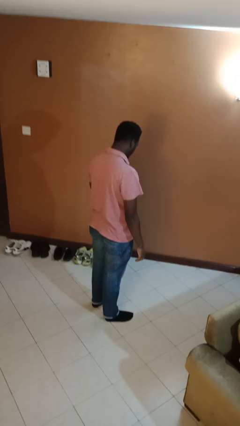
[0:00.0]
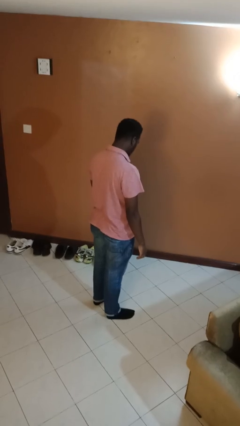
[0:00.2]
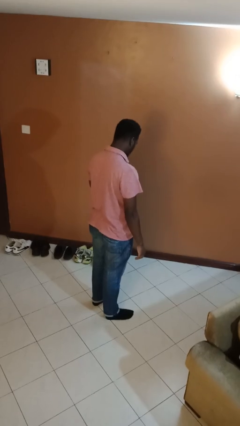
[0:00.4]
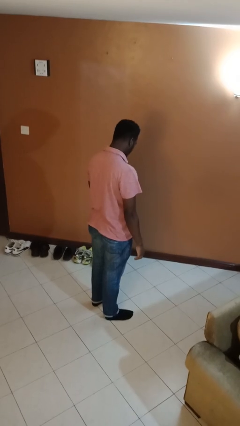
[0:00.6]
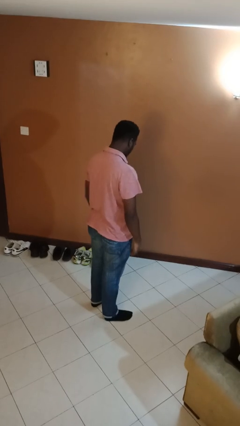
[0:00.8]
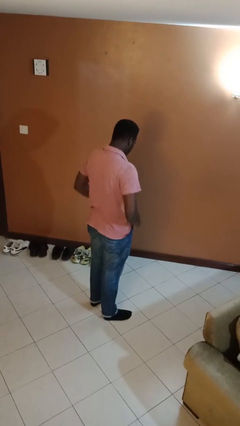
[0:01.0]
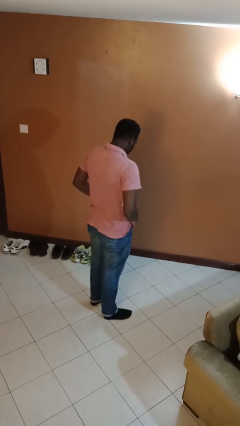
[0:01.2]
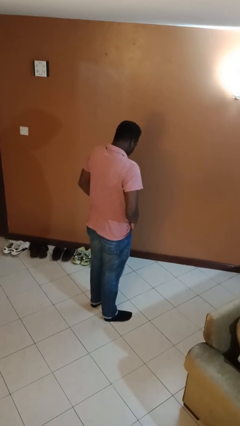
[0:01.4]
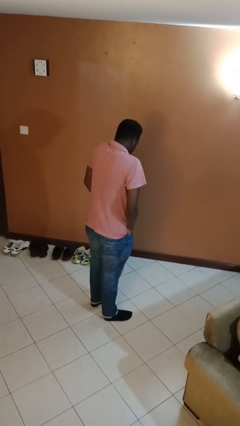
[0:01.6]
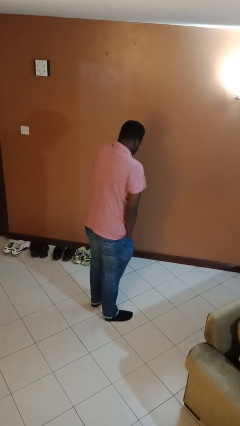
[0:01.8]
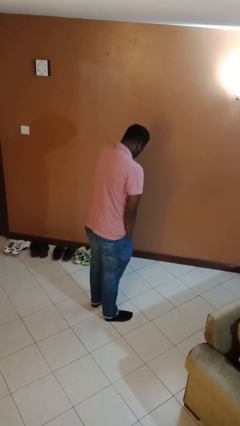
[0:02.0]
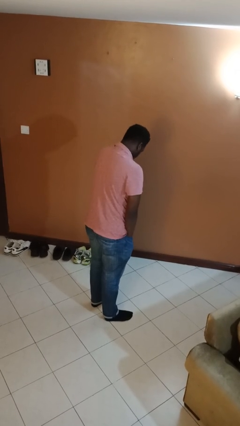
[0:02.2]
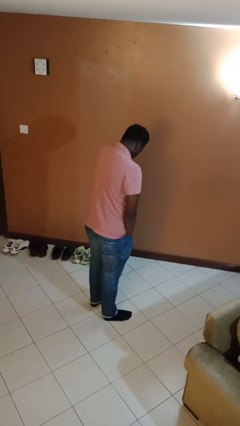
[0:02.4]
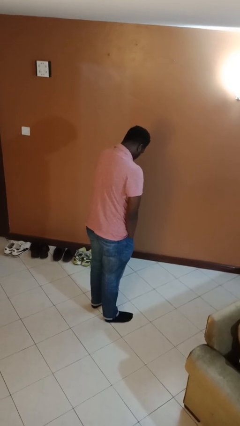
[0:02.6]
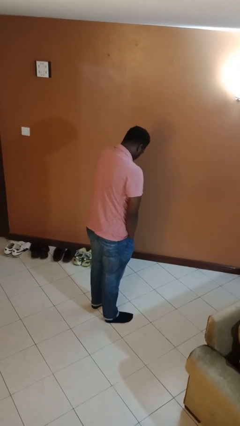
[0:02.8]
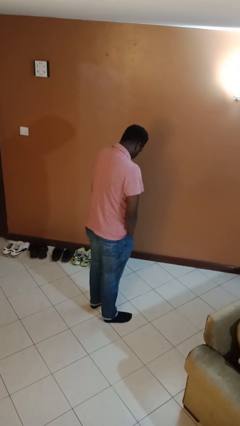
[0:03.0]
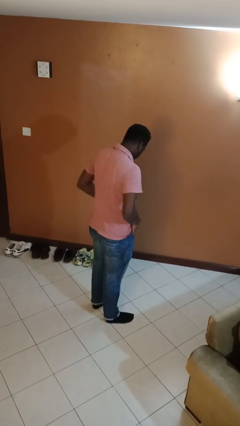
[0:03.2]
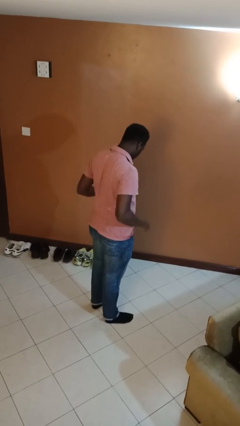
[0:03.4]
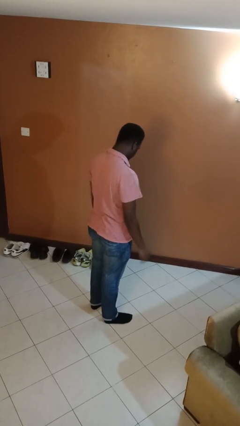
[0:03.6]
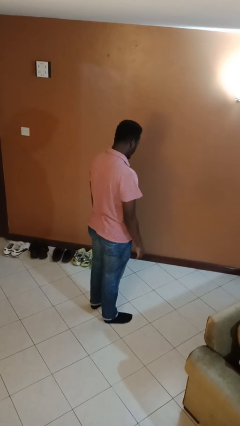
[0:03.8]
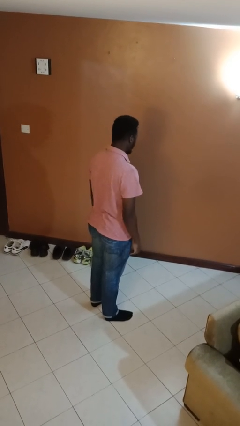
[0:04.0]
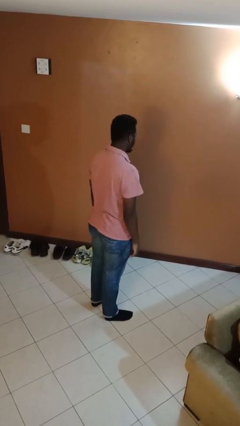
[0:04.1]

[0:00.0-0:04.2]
person puts hands in back pockets

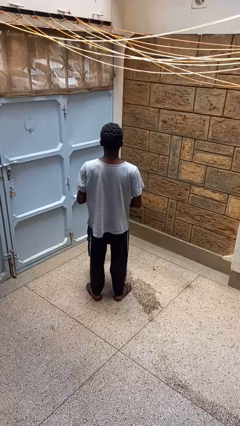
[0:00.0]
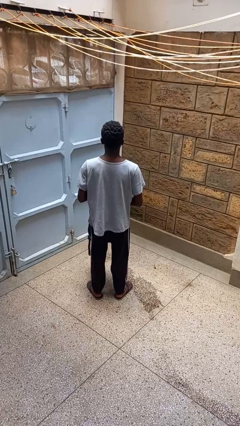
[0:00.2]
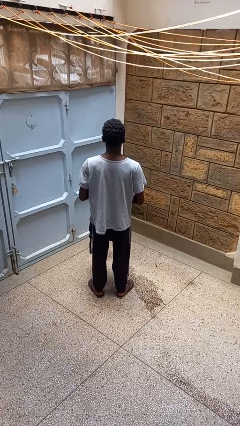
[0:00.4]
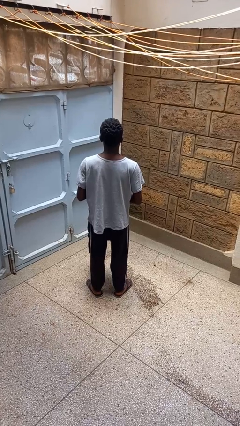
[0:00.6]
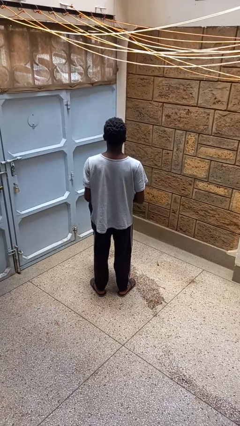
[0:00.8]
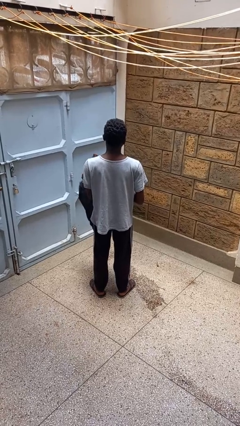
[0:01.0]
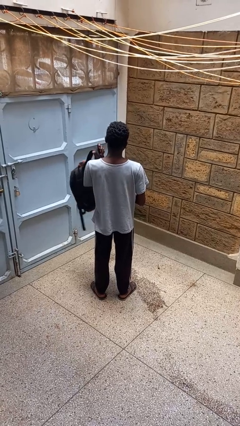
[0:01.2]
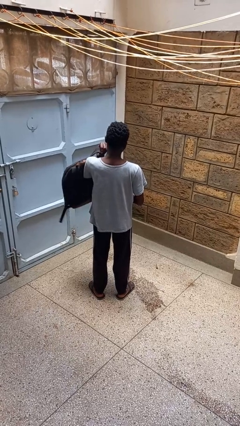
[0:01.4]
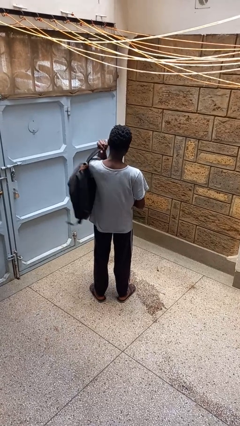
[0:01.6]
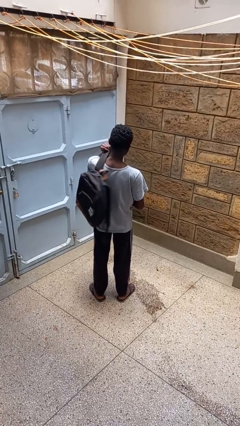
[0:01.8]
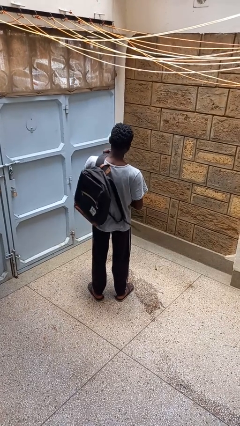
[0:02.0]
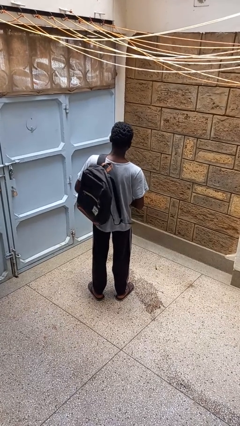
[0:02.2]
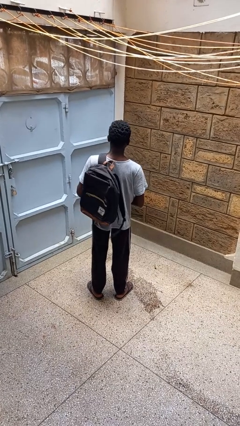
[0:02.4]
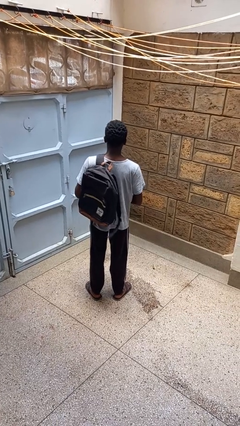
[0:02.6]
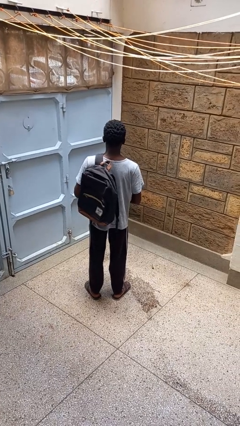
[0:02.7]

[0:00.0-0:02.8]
person puts on backpack

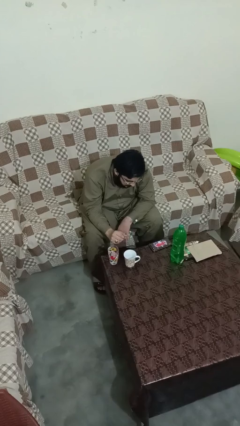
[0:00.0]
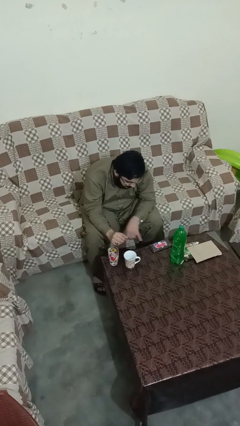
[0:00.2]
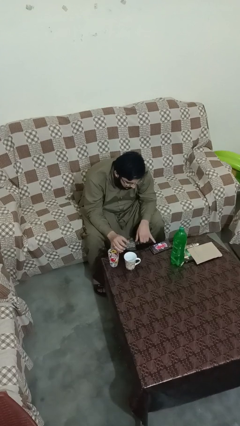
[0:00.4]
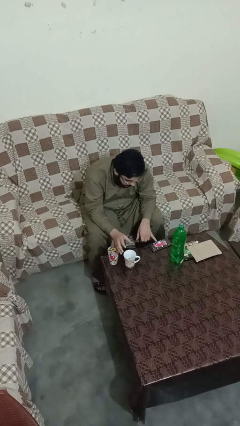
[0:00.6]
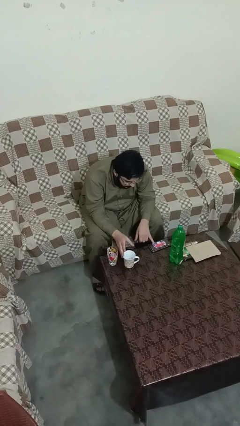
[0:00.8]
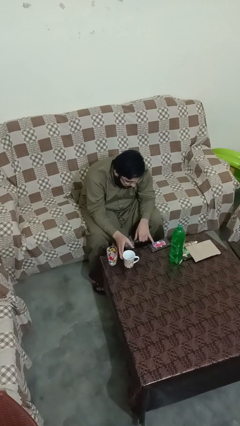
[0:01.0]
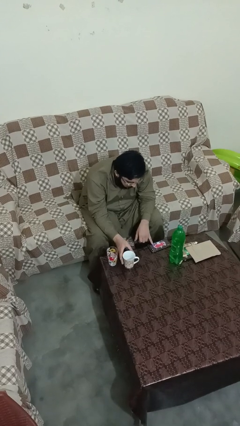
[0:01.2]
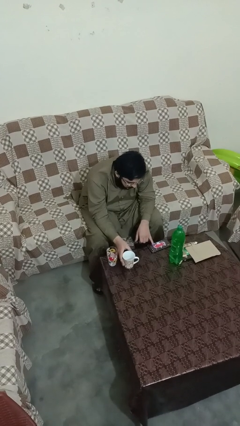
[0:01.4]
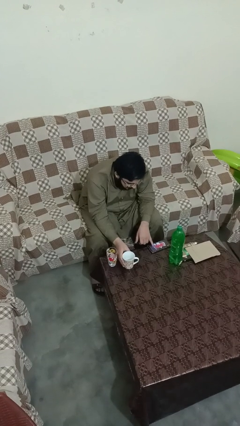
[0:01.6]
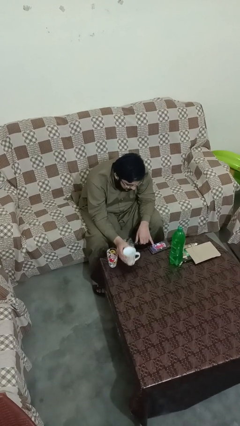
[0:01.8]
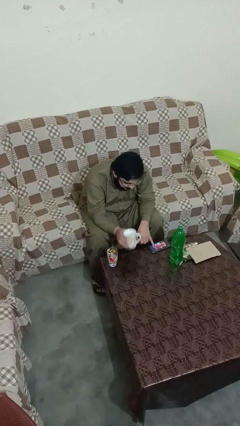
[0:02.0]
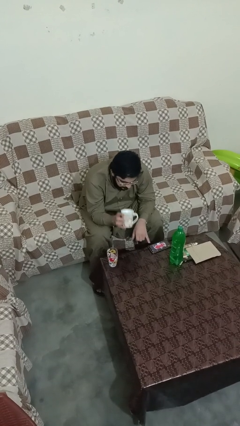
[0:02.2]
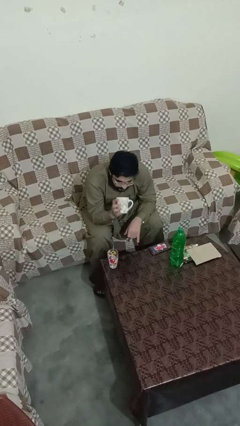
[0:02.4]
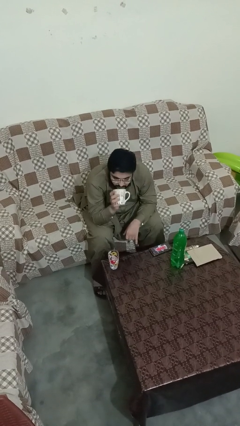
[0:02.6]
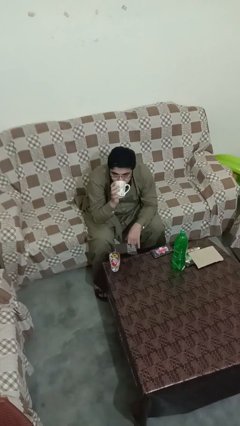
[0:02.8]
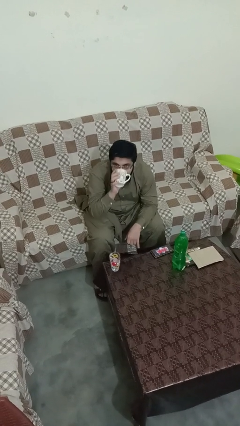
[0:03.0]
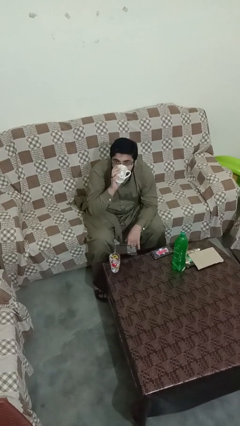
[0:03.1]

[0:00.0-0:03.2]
person picks up object from table

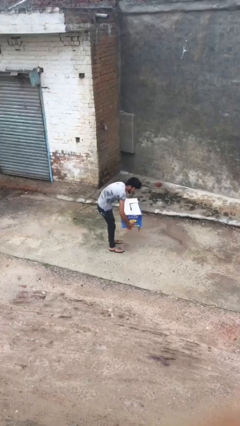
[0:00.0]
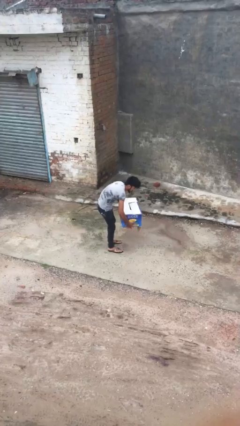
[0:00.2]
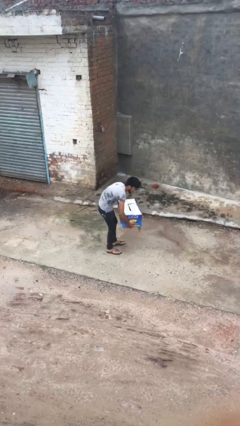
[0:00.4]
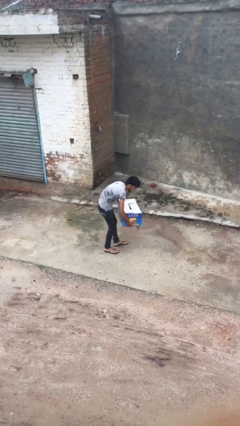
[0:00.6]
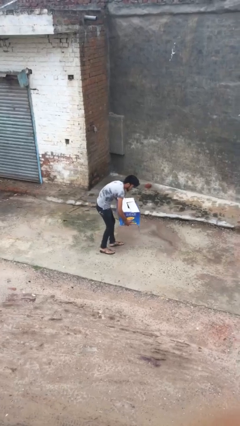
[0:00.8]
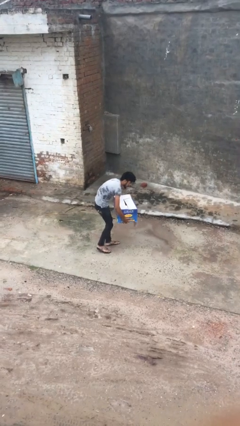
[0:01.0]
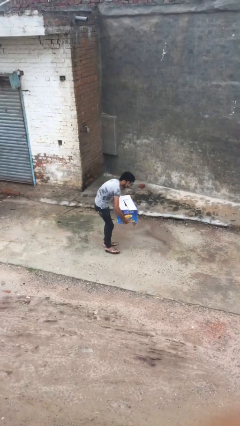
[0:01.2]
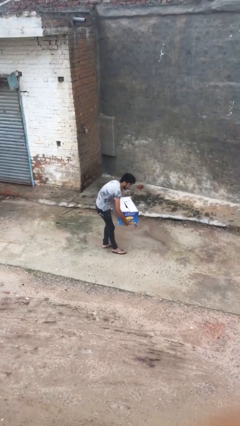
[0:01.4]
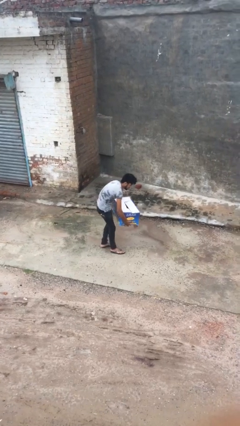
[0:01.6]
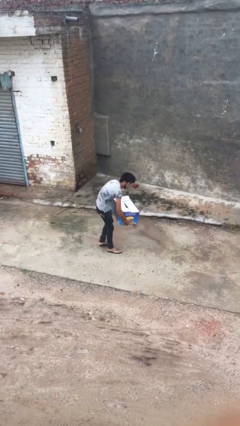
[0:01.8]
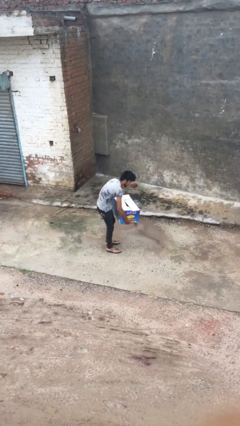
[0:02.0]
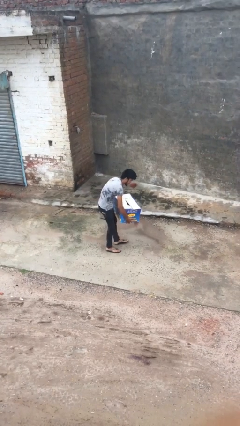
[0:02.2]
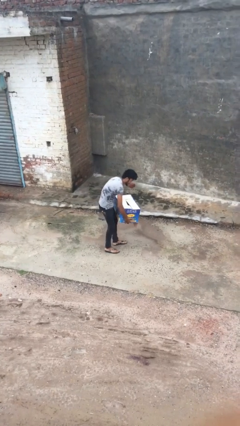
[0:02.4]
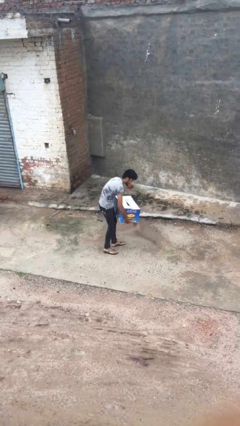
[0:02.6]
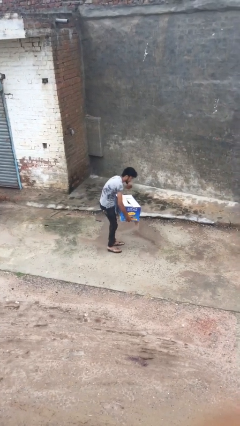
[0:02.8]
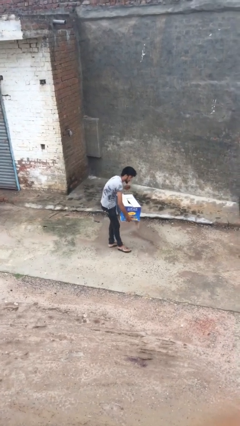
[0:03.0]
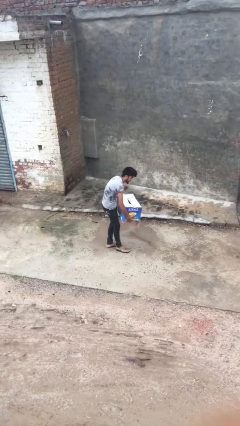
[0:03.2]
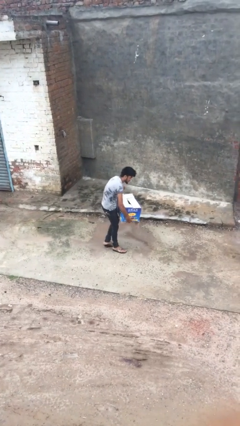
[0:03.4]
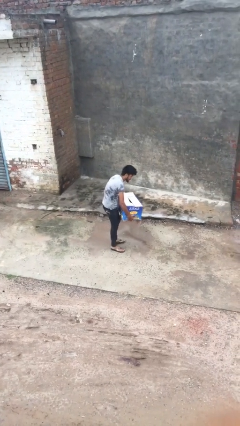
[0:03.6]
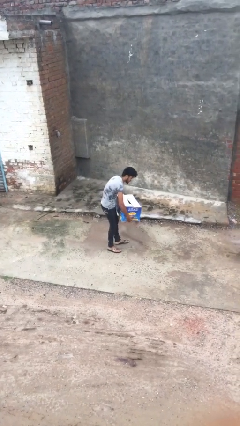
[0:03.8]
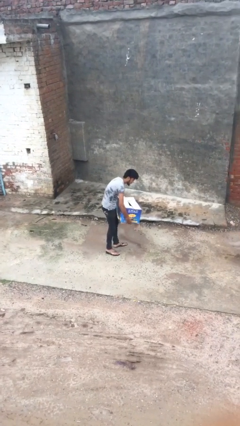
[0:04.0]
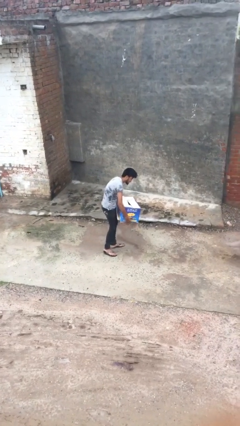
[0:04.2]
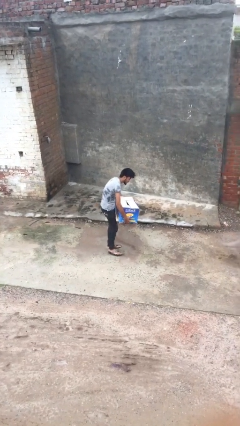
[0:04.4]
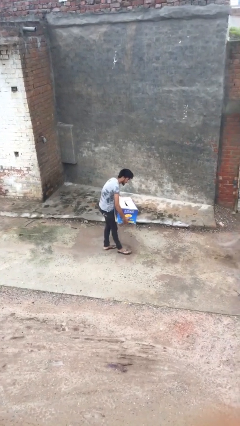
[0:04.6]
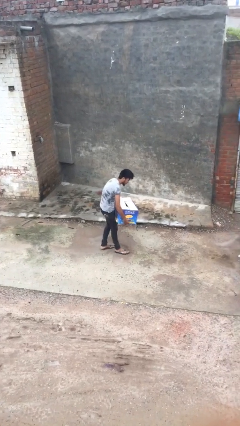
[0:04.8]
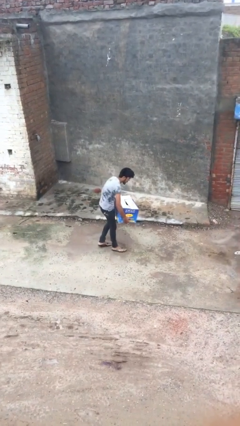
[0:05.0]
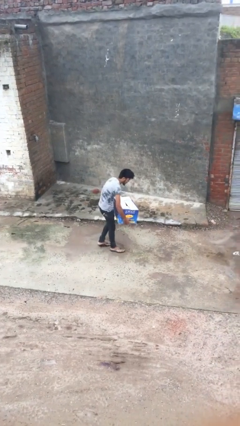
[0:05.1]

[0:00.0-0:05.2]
person carries heavy object

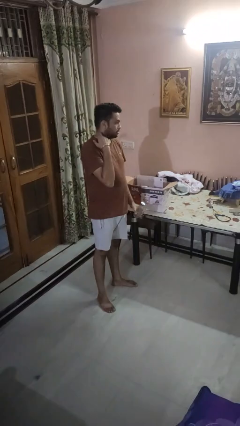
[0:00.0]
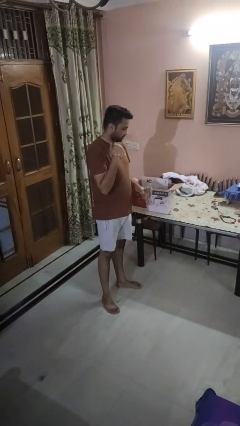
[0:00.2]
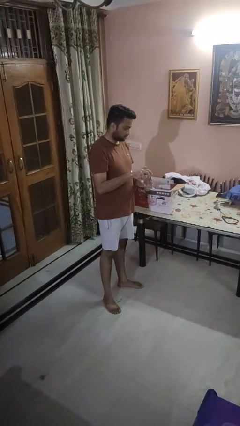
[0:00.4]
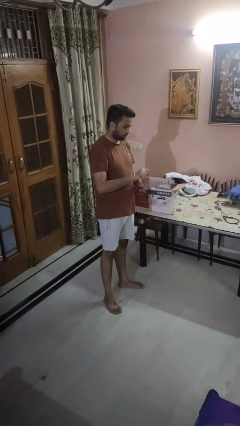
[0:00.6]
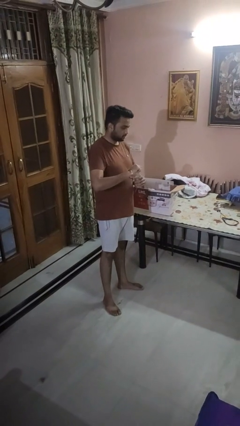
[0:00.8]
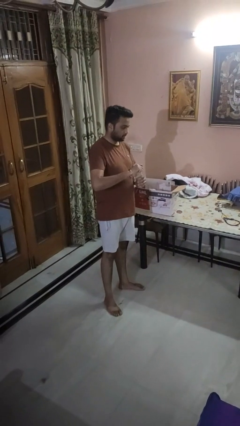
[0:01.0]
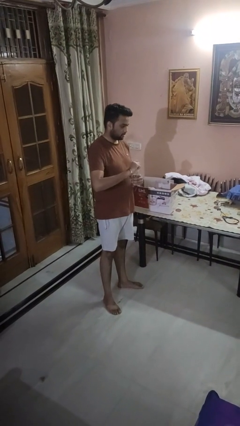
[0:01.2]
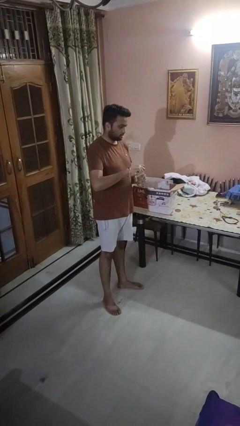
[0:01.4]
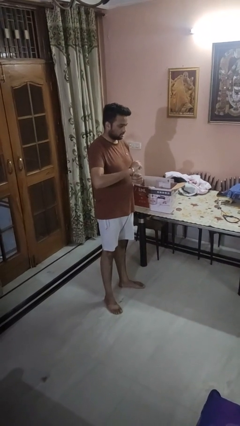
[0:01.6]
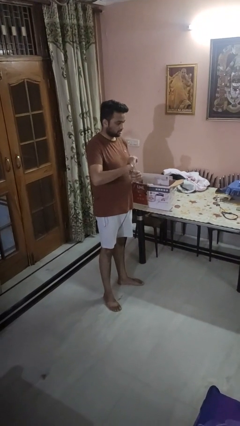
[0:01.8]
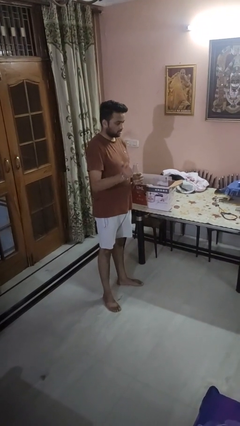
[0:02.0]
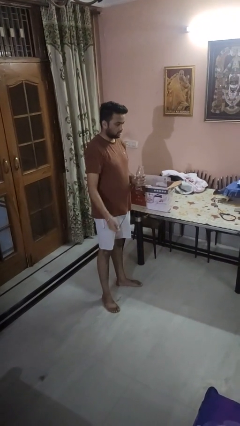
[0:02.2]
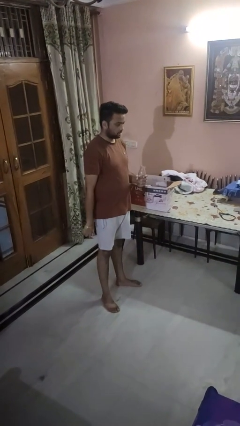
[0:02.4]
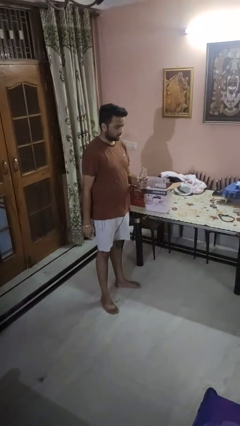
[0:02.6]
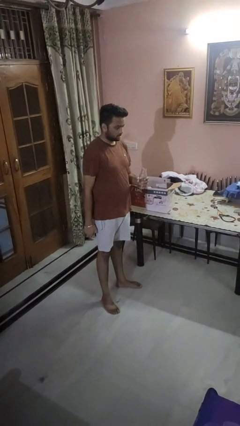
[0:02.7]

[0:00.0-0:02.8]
person unscrews lid from bottle
